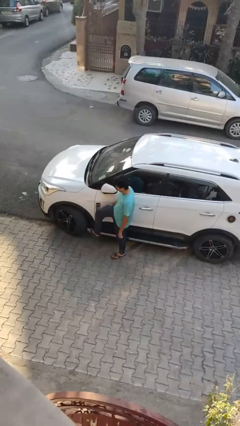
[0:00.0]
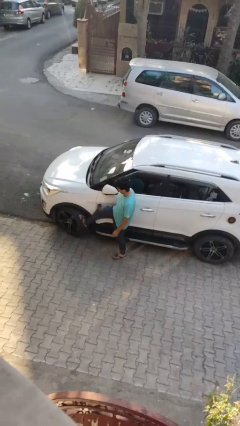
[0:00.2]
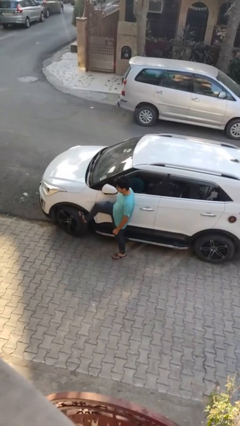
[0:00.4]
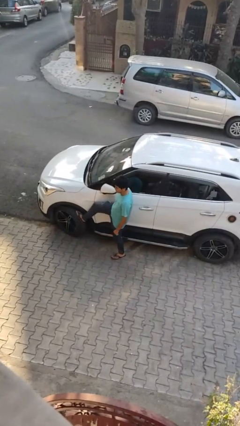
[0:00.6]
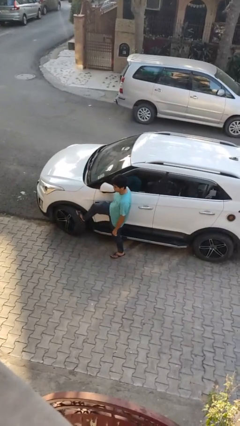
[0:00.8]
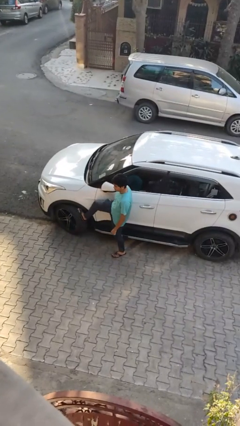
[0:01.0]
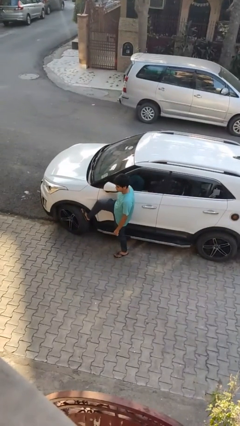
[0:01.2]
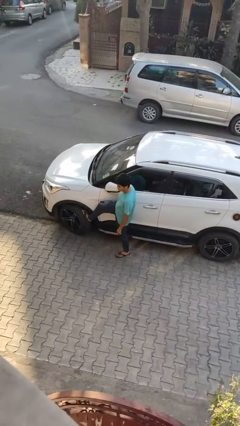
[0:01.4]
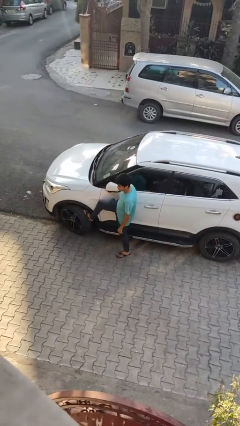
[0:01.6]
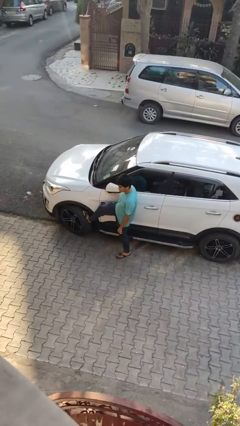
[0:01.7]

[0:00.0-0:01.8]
person kicks car tires

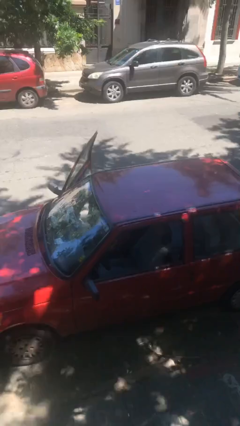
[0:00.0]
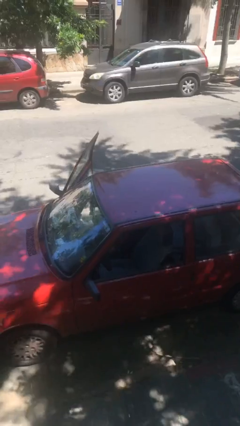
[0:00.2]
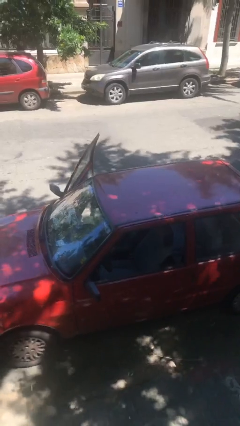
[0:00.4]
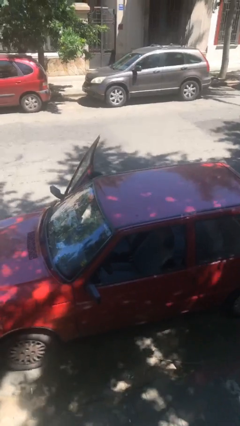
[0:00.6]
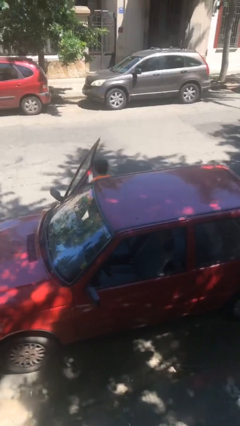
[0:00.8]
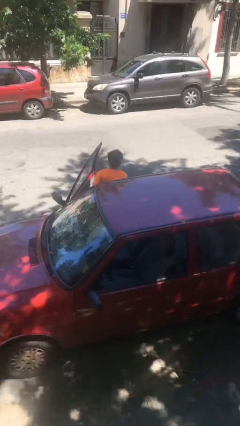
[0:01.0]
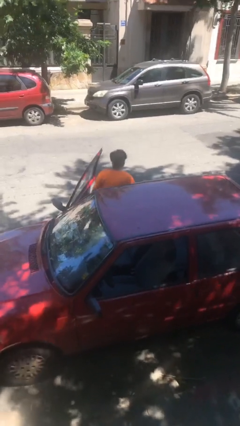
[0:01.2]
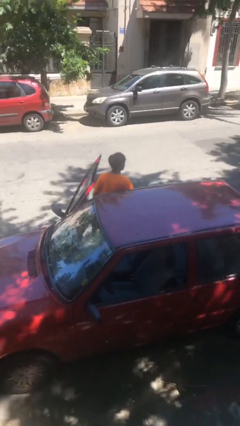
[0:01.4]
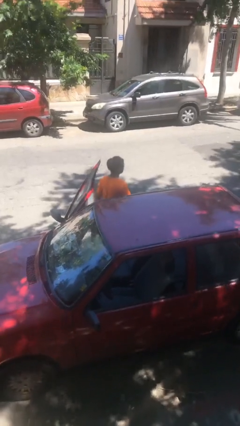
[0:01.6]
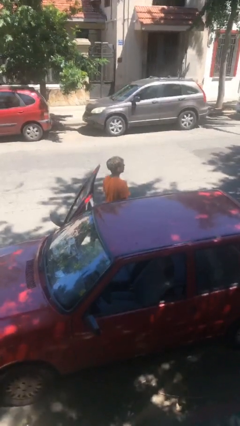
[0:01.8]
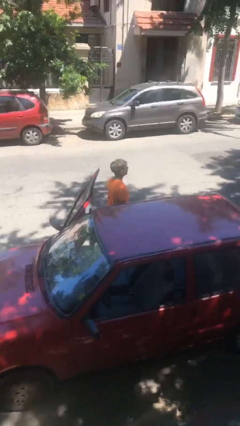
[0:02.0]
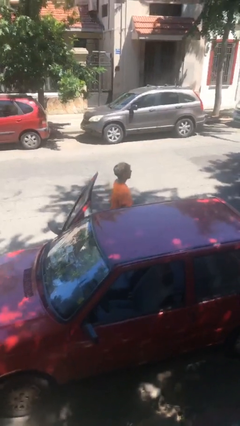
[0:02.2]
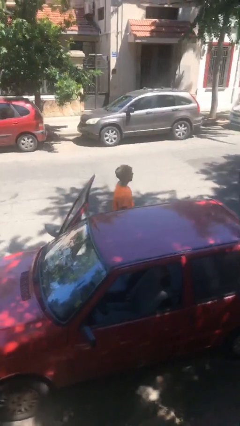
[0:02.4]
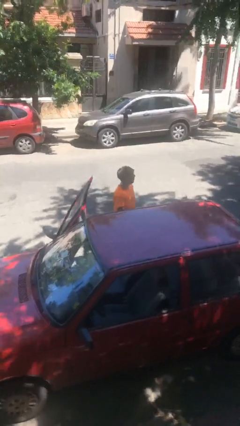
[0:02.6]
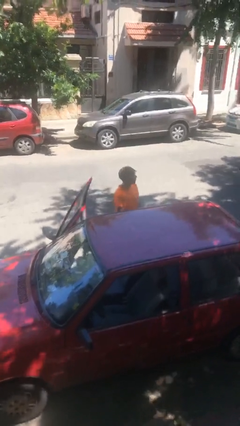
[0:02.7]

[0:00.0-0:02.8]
person exits car

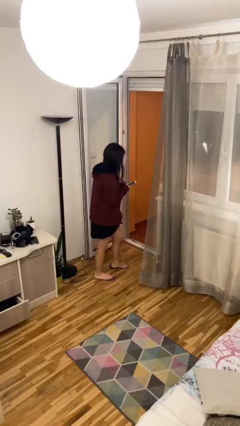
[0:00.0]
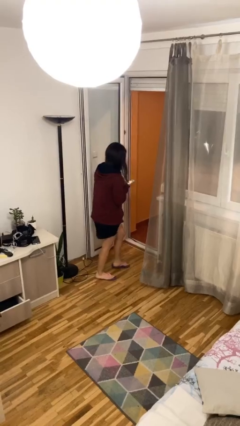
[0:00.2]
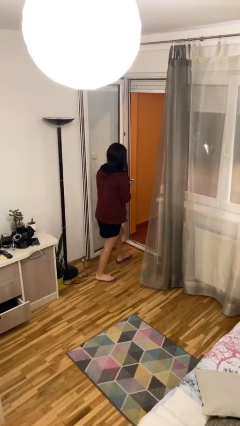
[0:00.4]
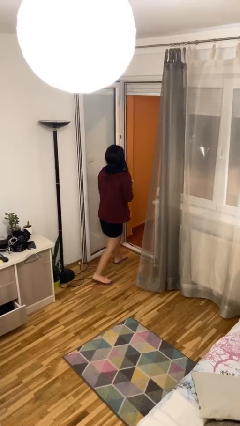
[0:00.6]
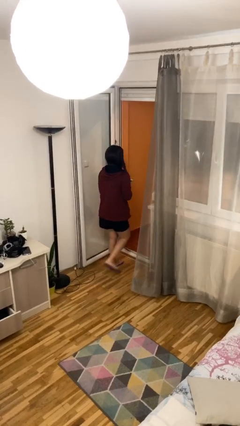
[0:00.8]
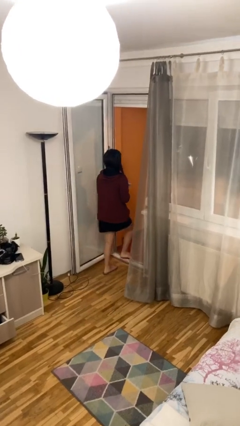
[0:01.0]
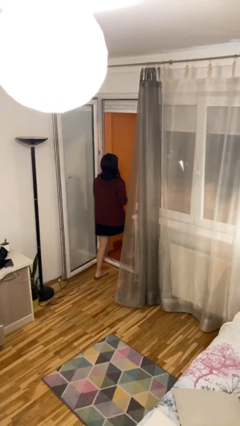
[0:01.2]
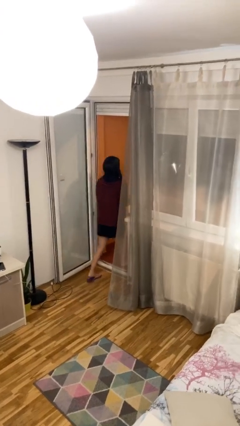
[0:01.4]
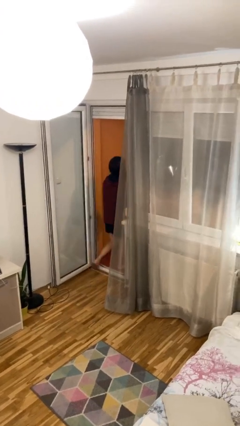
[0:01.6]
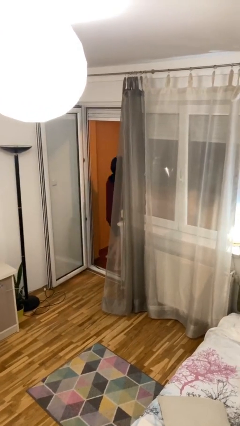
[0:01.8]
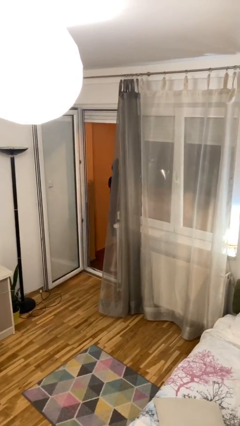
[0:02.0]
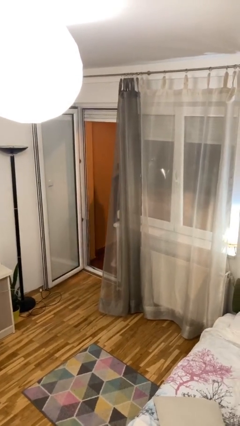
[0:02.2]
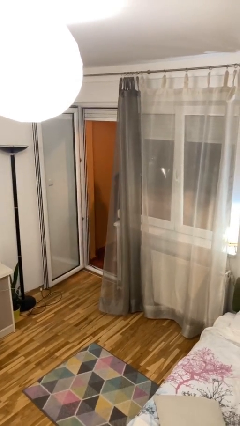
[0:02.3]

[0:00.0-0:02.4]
person exits scene through structure

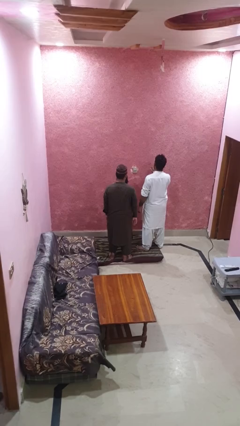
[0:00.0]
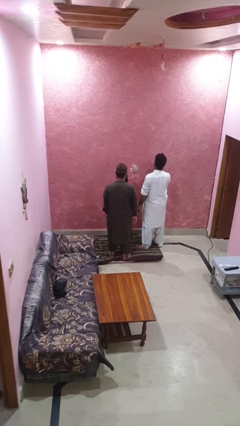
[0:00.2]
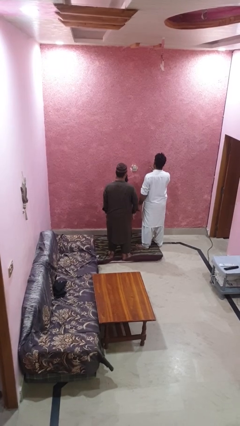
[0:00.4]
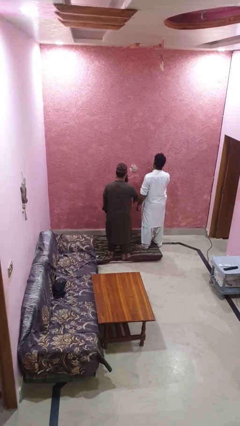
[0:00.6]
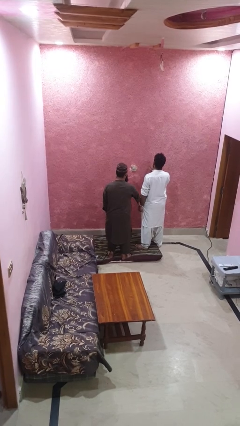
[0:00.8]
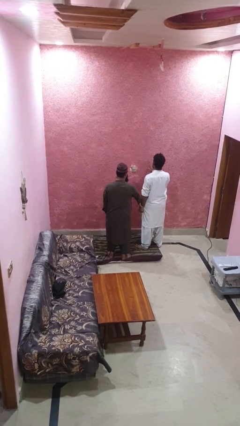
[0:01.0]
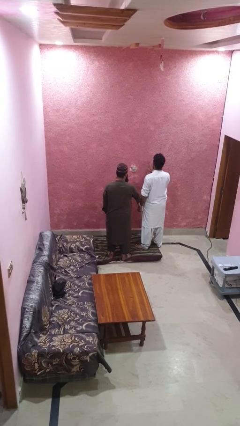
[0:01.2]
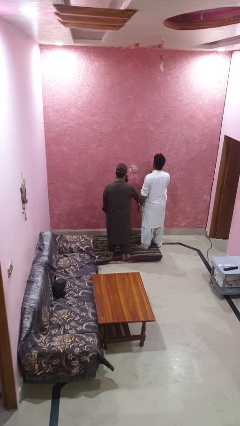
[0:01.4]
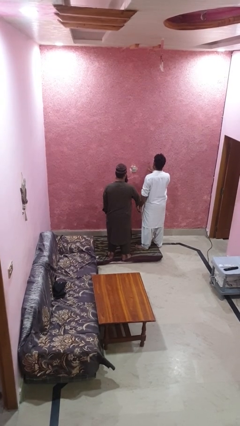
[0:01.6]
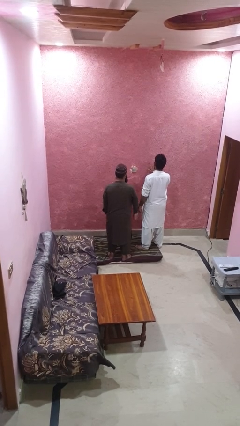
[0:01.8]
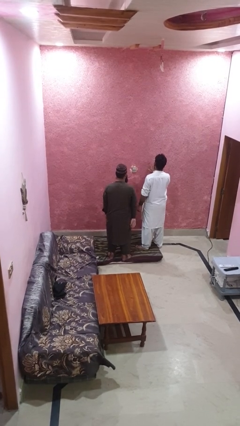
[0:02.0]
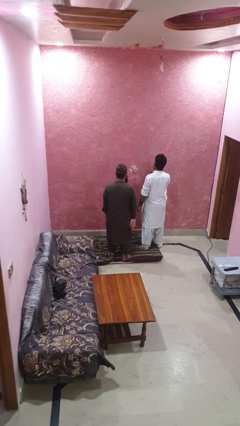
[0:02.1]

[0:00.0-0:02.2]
person grabs person by forearm

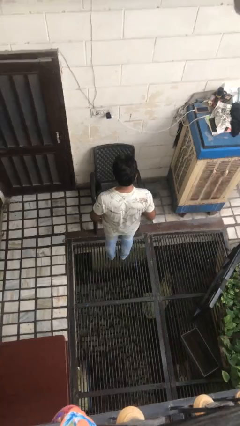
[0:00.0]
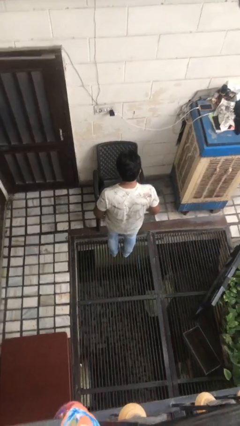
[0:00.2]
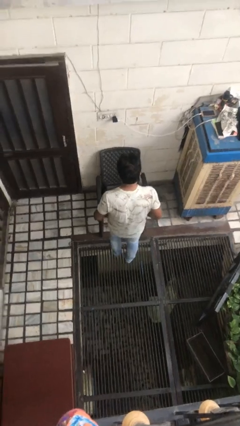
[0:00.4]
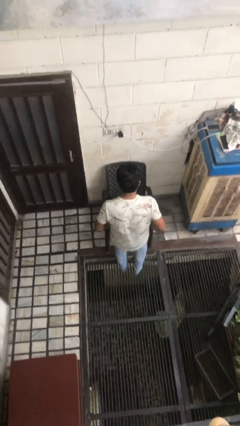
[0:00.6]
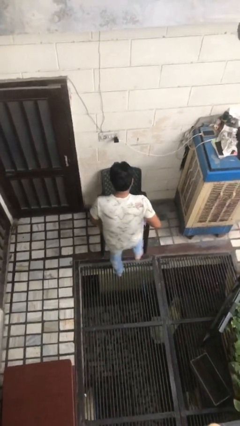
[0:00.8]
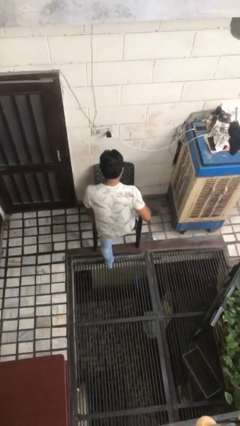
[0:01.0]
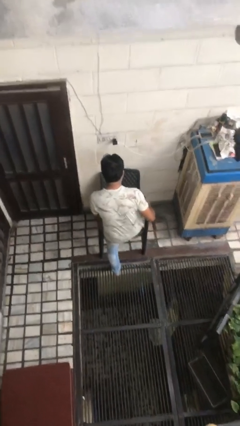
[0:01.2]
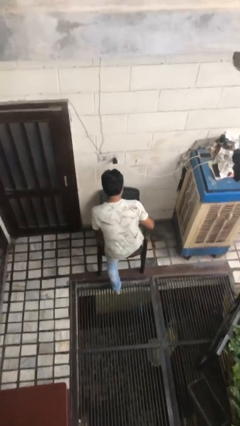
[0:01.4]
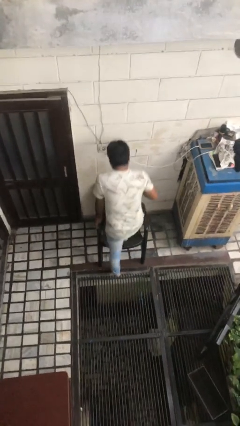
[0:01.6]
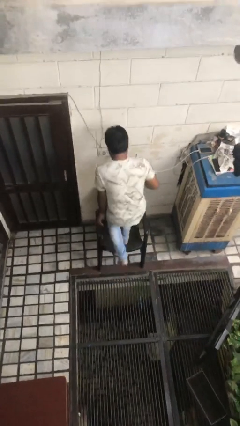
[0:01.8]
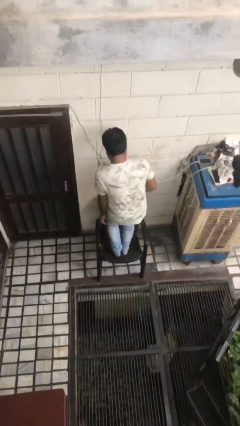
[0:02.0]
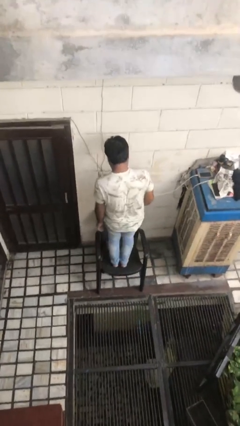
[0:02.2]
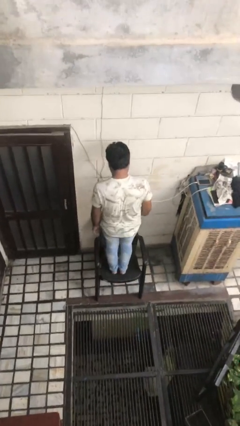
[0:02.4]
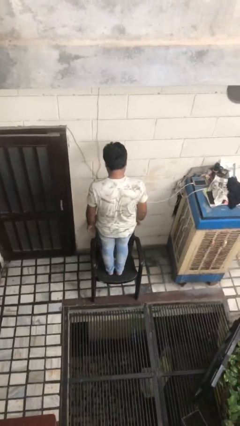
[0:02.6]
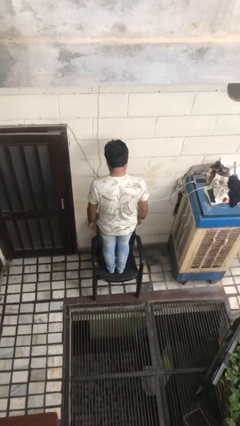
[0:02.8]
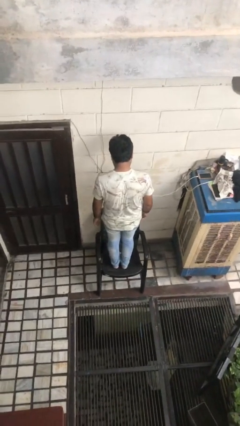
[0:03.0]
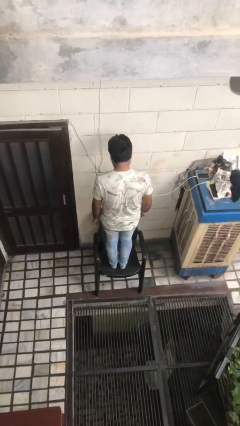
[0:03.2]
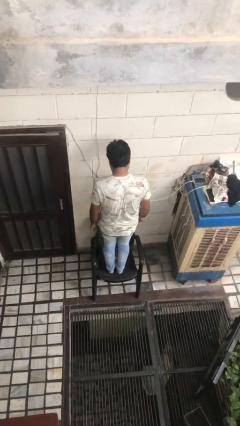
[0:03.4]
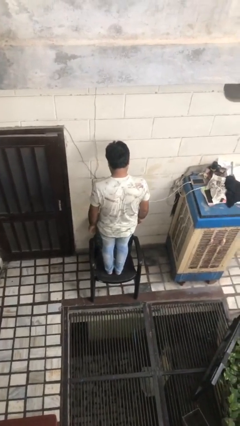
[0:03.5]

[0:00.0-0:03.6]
person climbs on chair

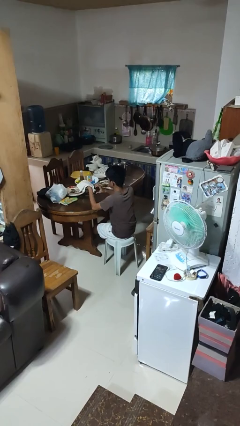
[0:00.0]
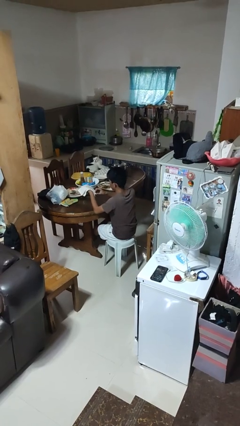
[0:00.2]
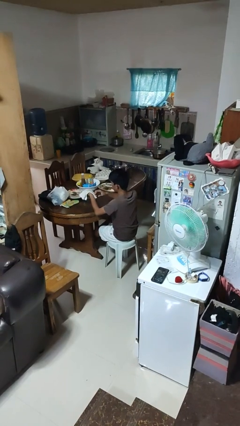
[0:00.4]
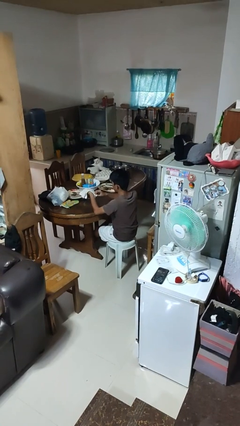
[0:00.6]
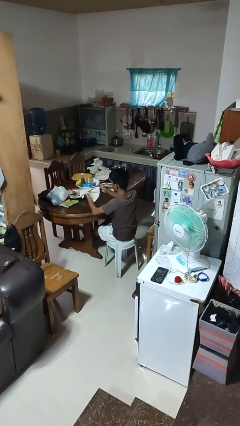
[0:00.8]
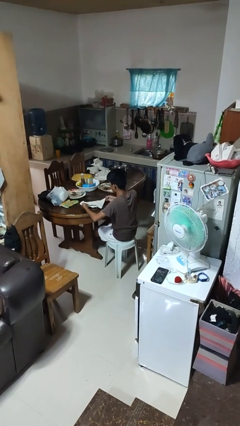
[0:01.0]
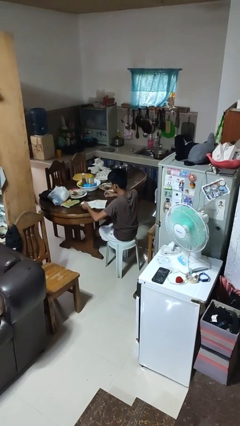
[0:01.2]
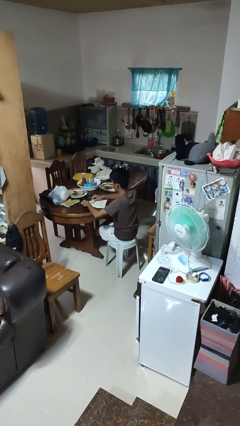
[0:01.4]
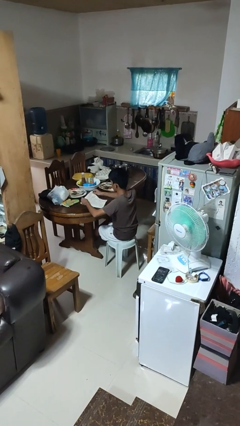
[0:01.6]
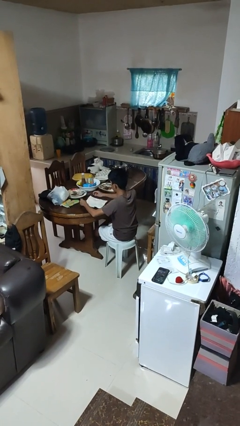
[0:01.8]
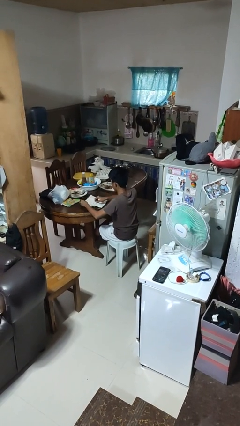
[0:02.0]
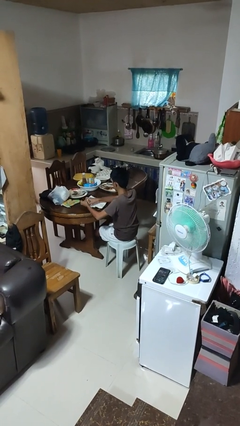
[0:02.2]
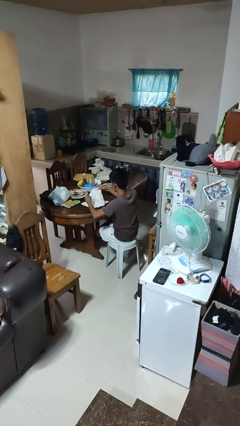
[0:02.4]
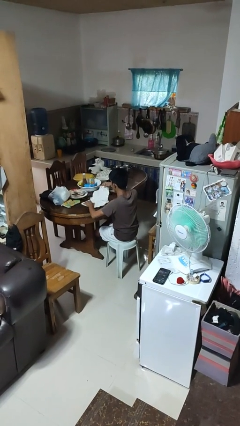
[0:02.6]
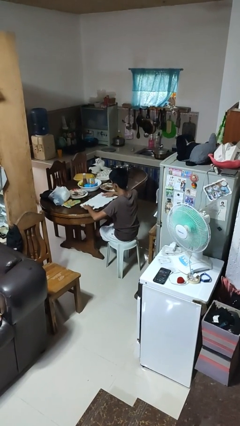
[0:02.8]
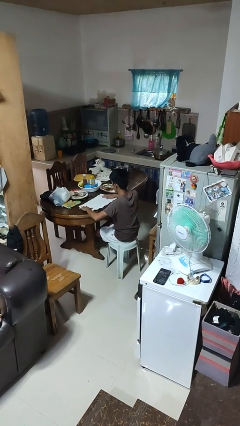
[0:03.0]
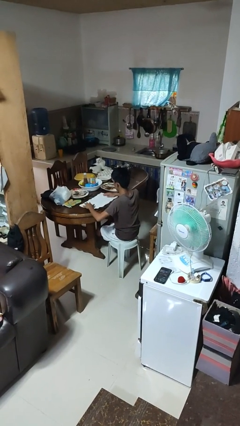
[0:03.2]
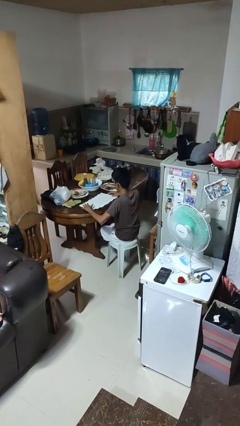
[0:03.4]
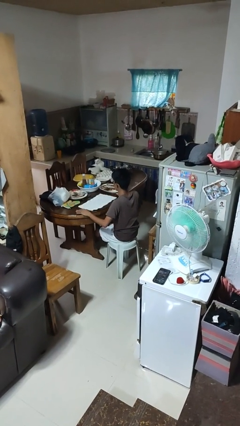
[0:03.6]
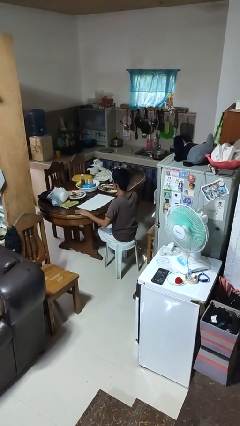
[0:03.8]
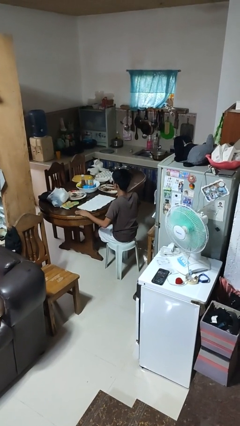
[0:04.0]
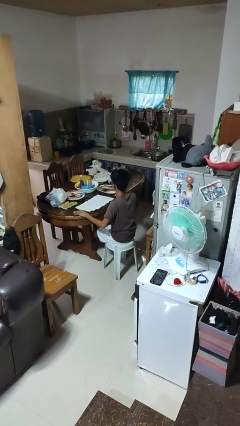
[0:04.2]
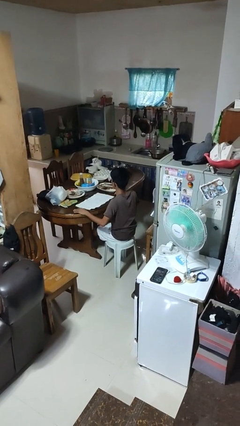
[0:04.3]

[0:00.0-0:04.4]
person spreads tablecloth
